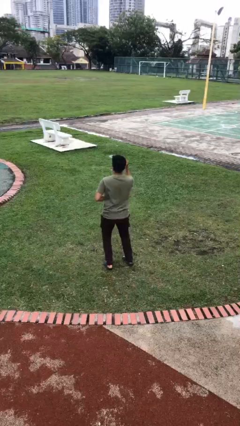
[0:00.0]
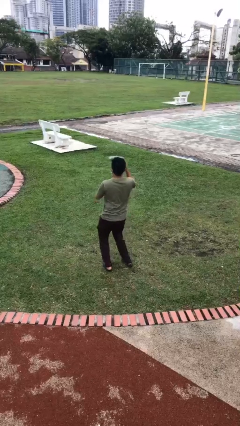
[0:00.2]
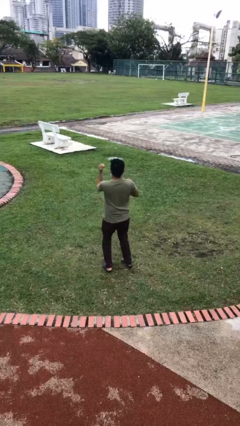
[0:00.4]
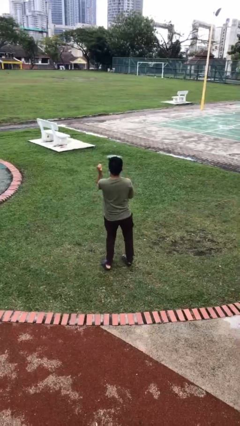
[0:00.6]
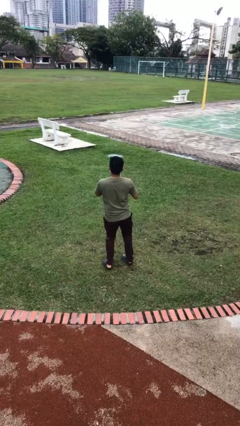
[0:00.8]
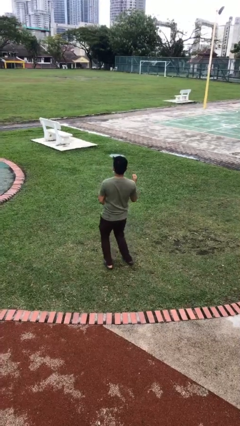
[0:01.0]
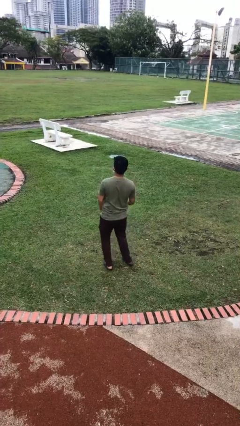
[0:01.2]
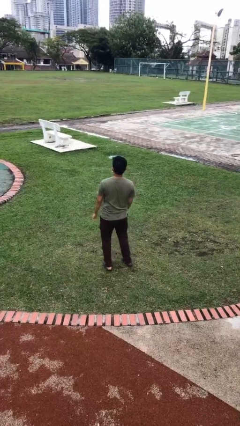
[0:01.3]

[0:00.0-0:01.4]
person dances in place

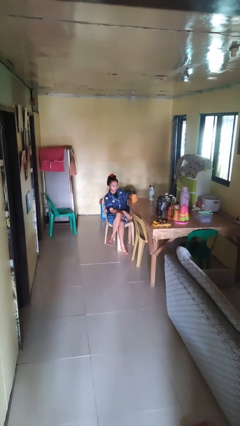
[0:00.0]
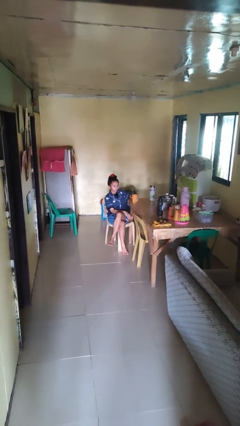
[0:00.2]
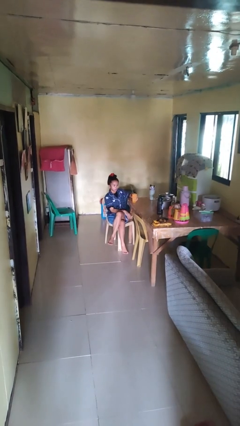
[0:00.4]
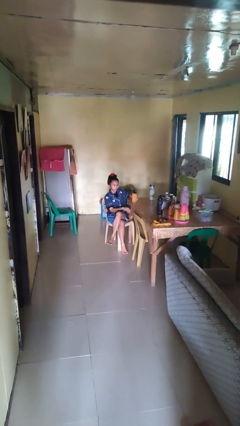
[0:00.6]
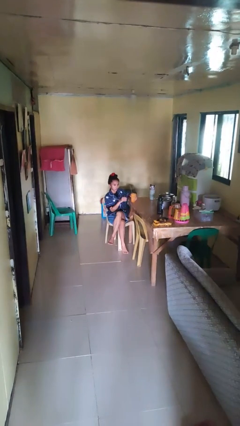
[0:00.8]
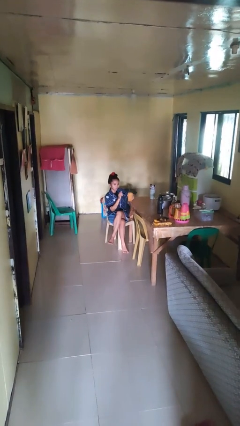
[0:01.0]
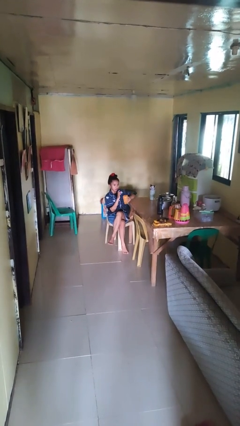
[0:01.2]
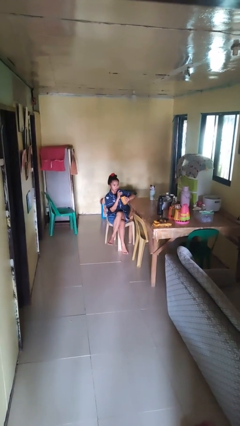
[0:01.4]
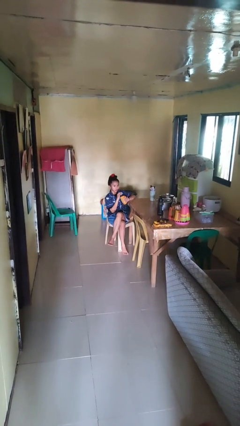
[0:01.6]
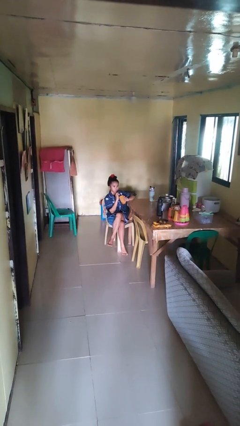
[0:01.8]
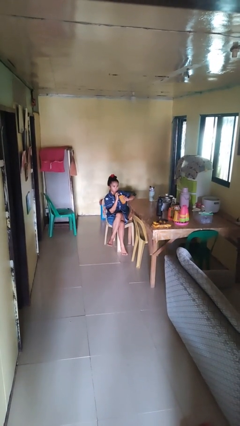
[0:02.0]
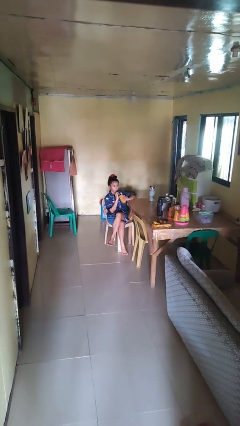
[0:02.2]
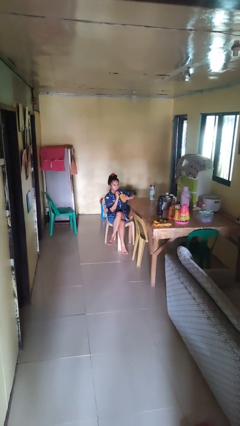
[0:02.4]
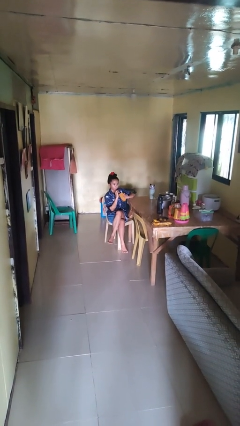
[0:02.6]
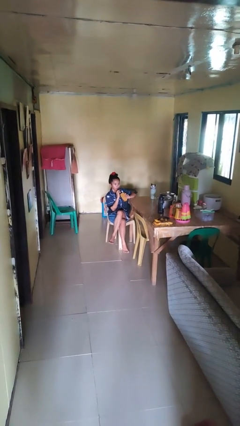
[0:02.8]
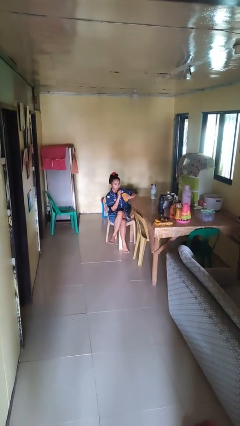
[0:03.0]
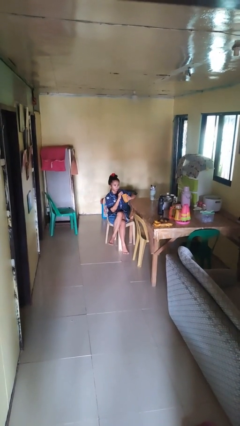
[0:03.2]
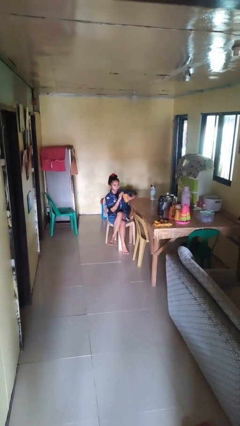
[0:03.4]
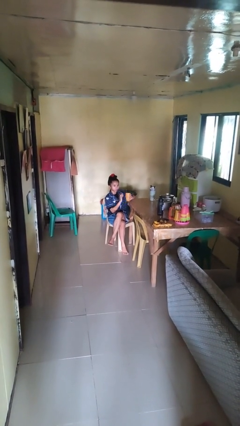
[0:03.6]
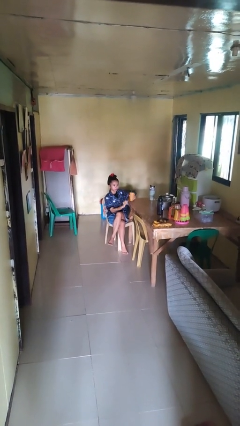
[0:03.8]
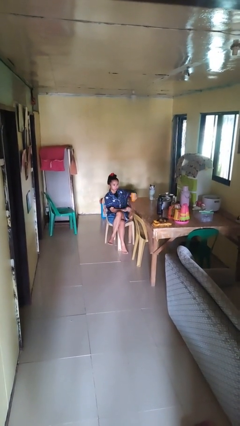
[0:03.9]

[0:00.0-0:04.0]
person drinks from straw

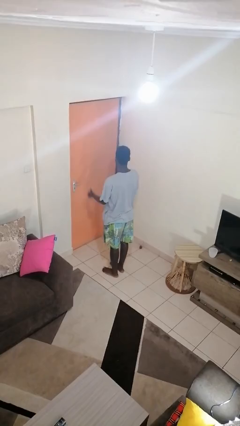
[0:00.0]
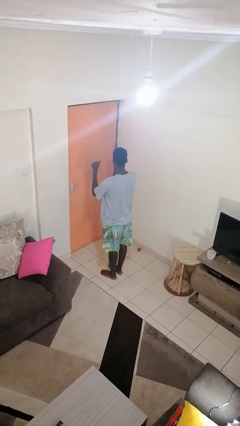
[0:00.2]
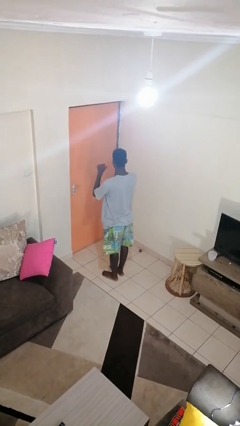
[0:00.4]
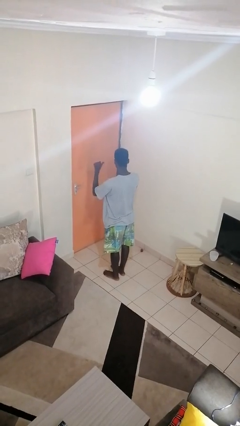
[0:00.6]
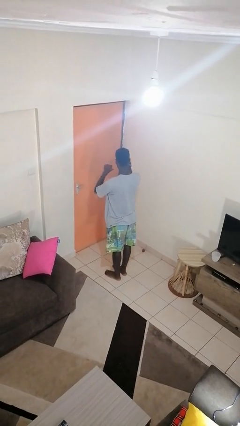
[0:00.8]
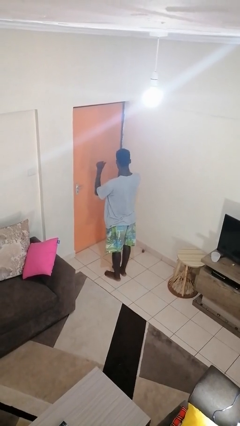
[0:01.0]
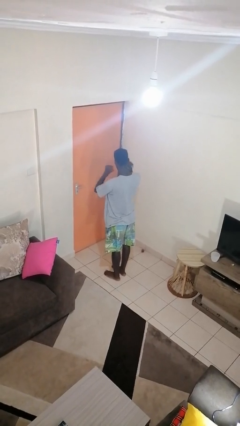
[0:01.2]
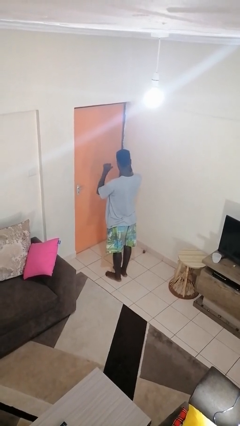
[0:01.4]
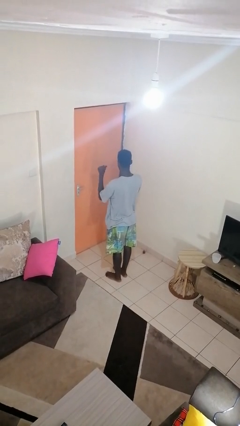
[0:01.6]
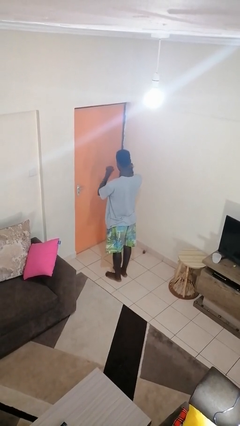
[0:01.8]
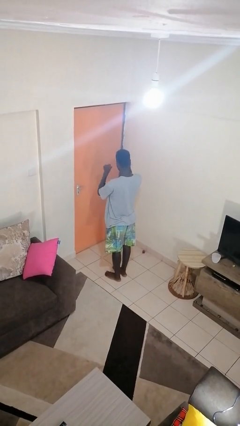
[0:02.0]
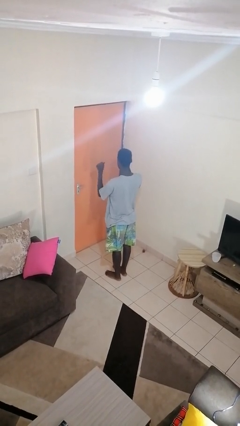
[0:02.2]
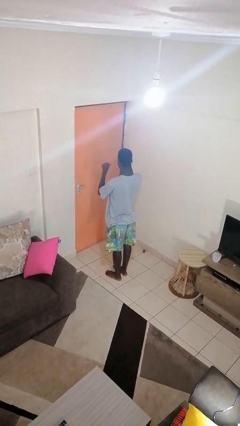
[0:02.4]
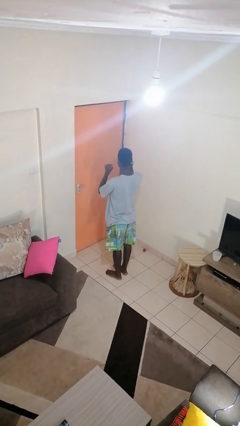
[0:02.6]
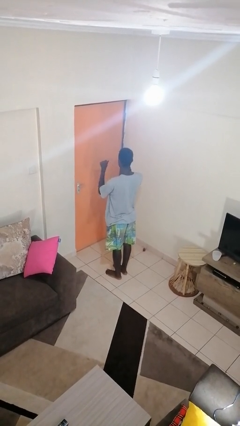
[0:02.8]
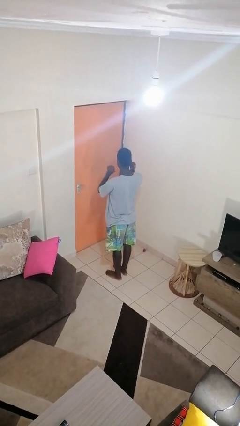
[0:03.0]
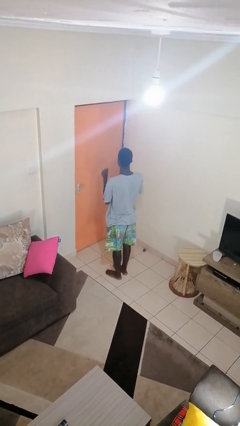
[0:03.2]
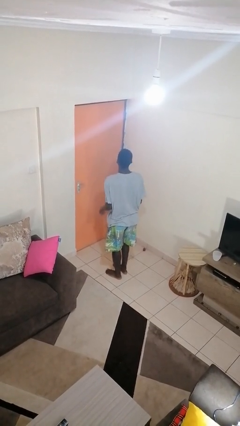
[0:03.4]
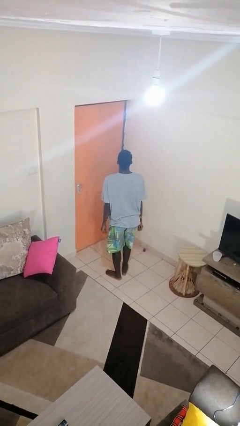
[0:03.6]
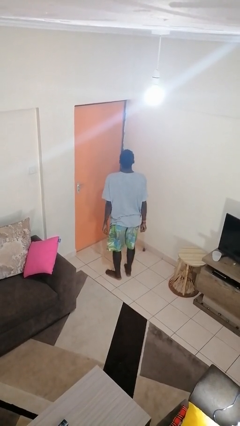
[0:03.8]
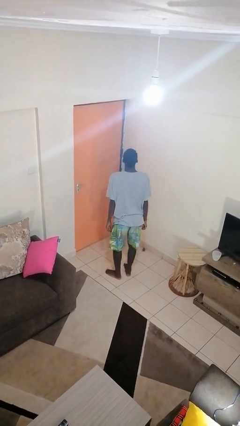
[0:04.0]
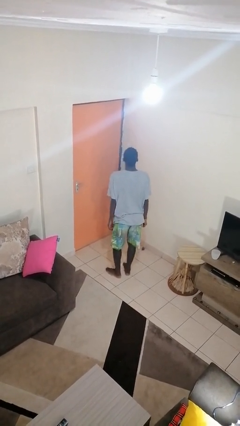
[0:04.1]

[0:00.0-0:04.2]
person gestures behind me

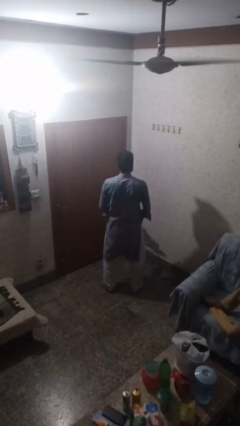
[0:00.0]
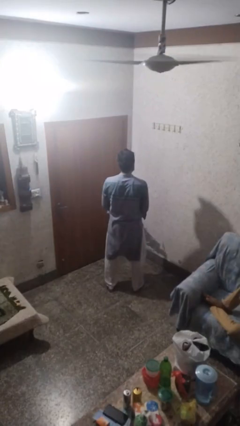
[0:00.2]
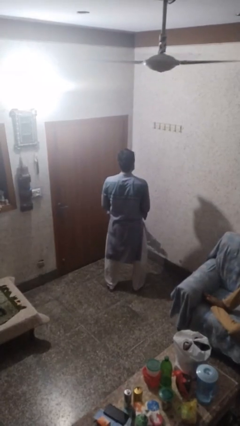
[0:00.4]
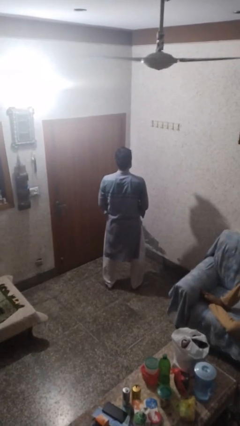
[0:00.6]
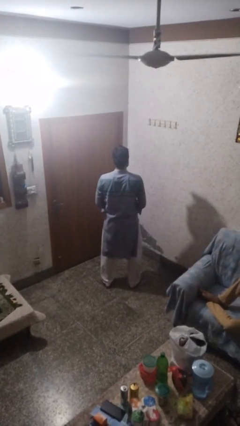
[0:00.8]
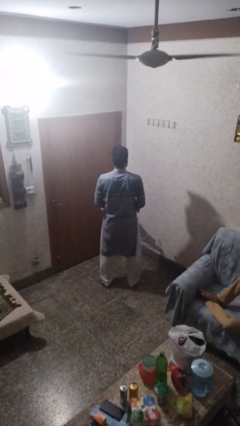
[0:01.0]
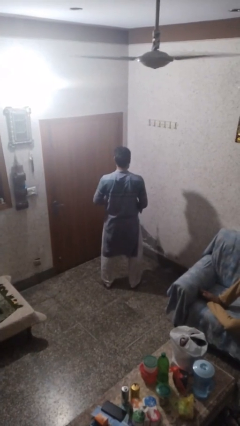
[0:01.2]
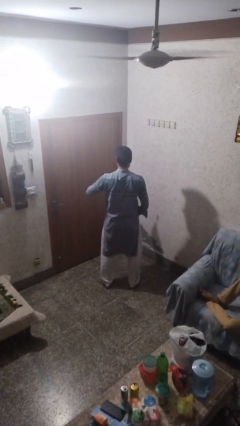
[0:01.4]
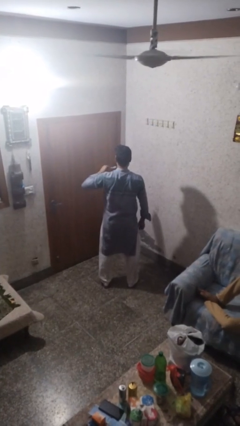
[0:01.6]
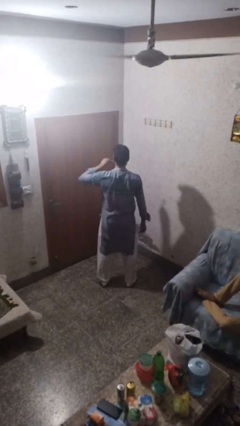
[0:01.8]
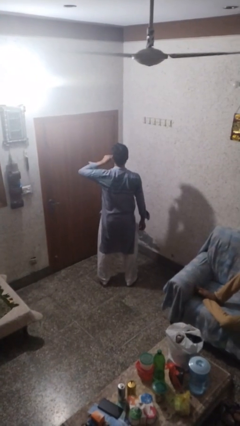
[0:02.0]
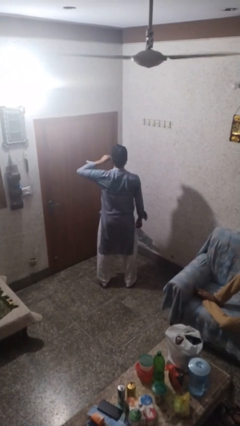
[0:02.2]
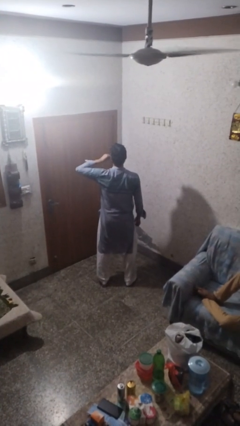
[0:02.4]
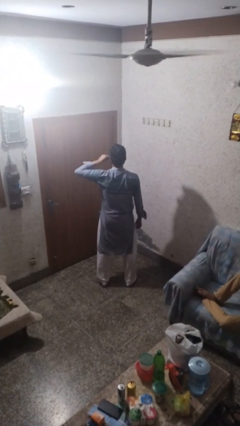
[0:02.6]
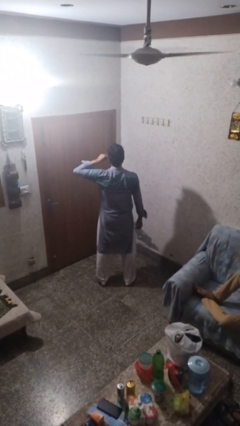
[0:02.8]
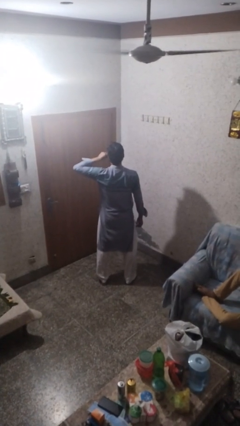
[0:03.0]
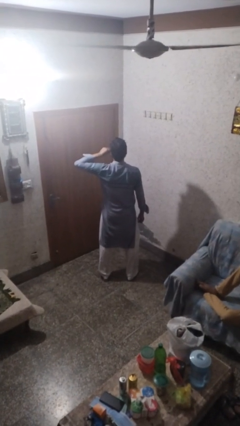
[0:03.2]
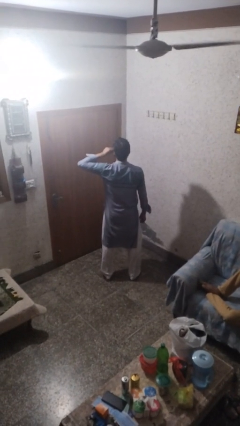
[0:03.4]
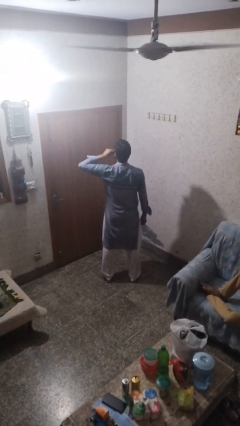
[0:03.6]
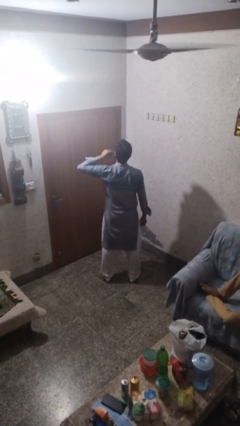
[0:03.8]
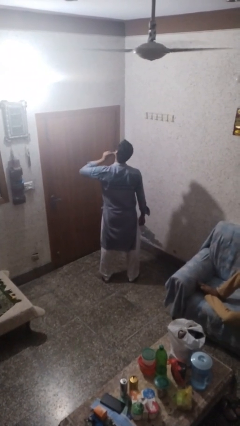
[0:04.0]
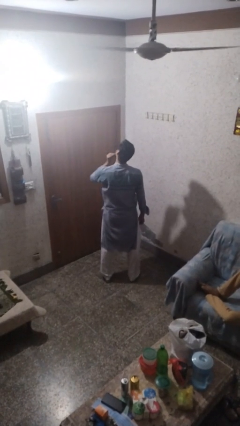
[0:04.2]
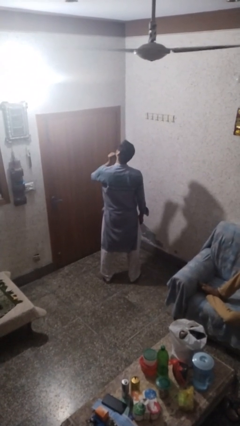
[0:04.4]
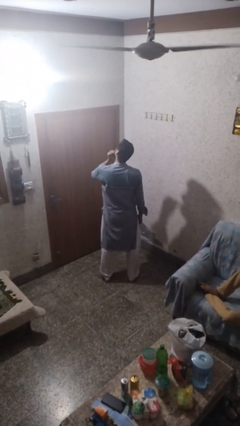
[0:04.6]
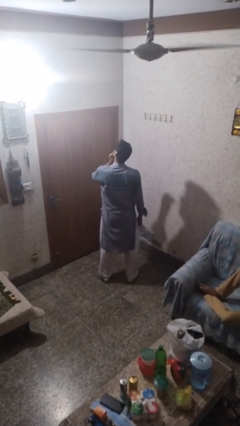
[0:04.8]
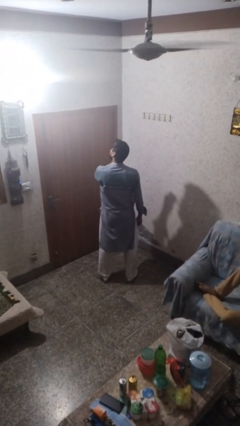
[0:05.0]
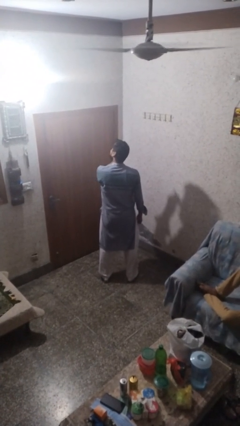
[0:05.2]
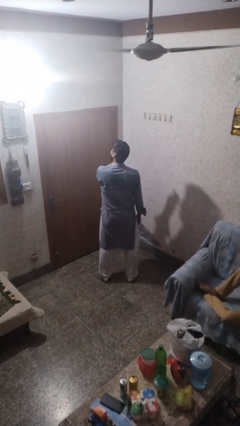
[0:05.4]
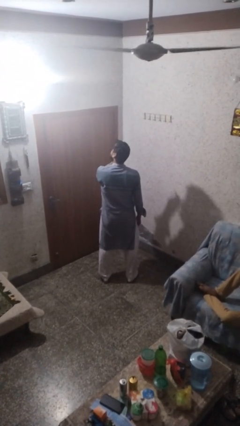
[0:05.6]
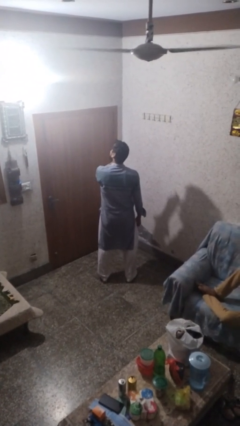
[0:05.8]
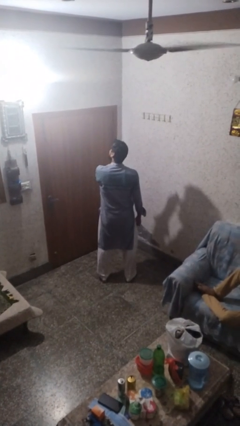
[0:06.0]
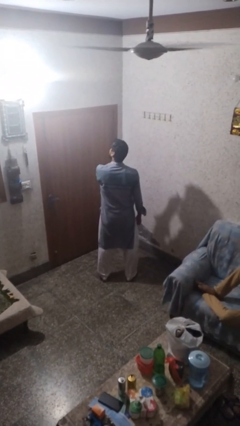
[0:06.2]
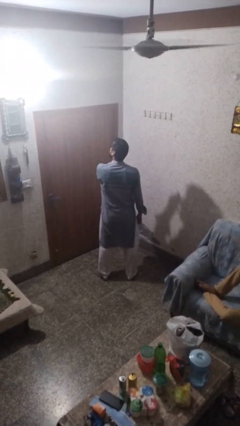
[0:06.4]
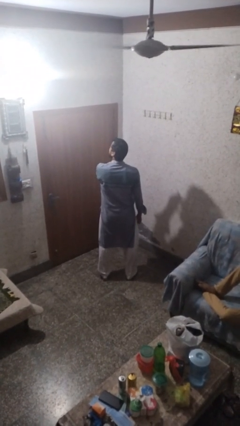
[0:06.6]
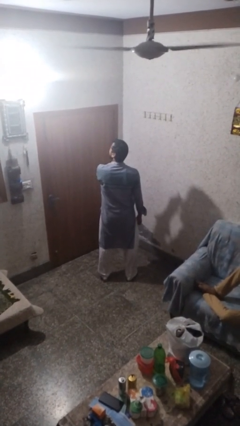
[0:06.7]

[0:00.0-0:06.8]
person brushes teeth

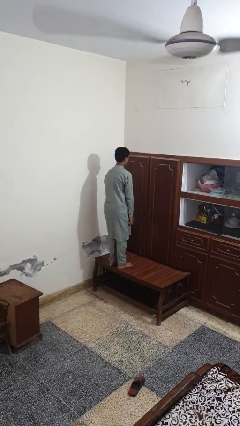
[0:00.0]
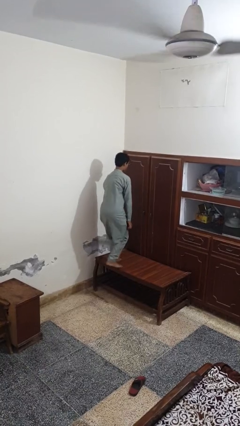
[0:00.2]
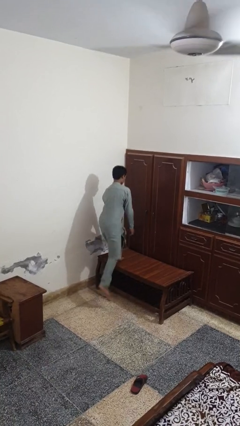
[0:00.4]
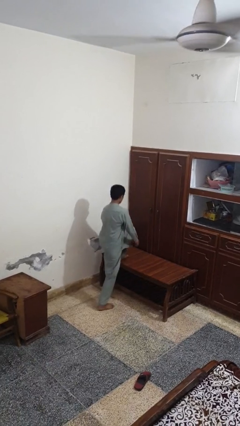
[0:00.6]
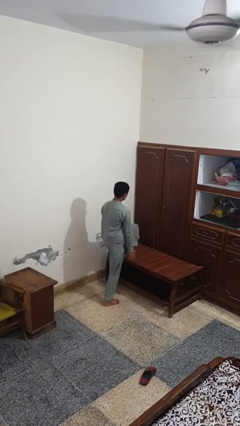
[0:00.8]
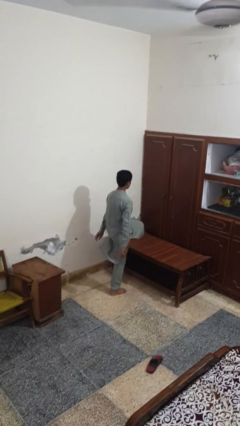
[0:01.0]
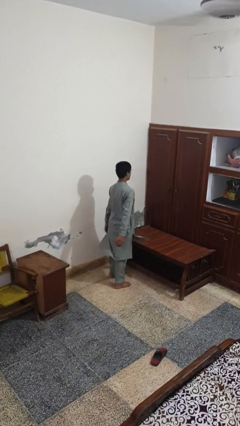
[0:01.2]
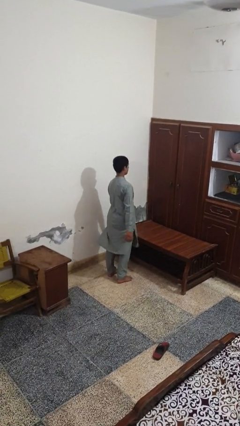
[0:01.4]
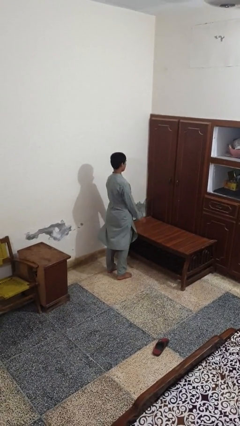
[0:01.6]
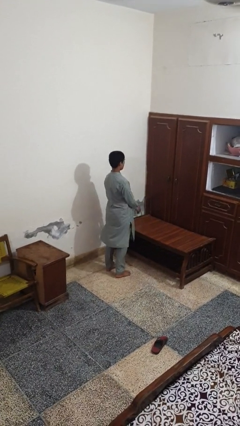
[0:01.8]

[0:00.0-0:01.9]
person climbs off table
